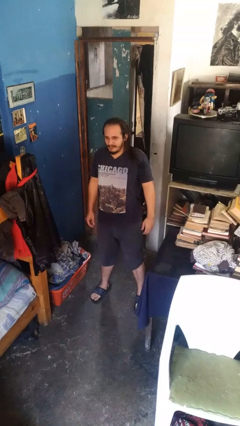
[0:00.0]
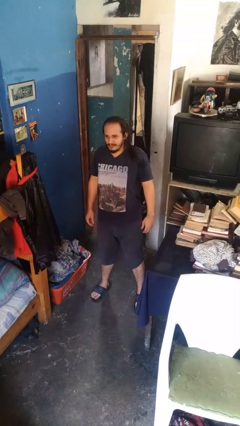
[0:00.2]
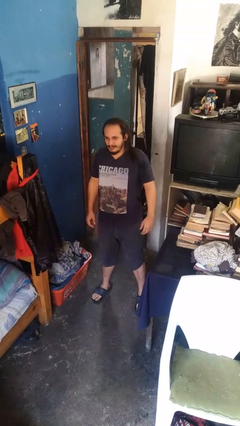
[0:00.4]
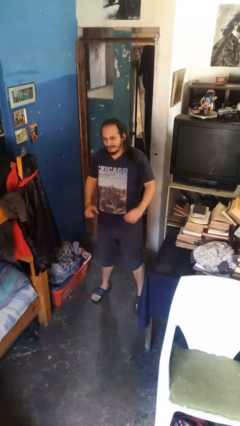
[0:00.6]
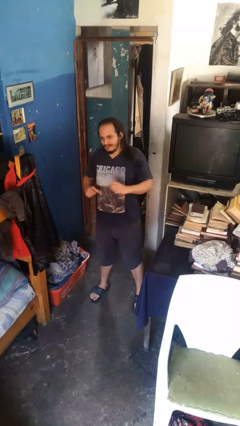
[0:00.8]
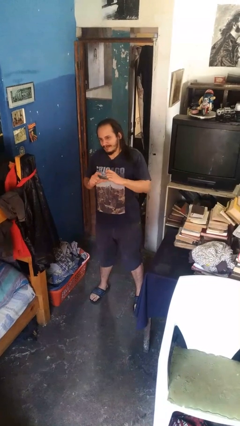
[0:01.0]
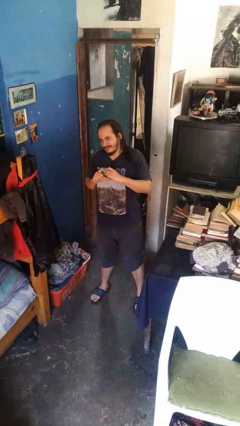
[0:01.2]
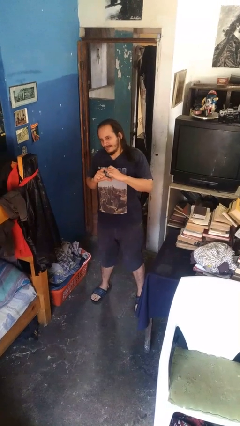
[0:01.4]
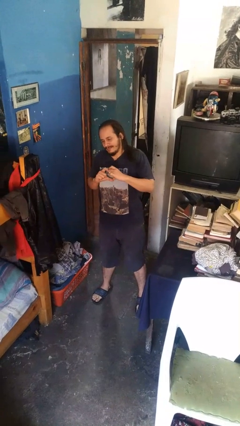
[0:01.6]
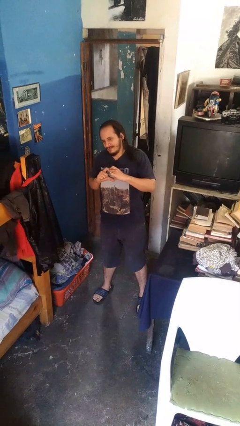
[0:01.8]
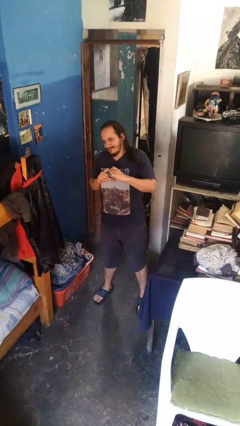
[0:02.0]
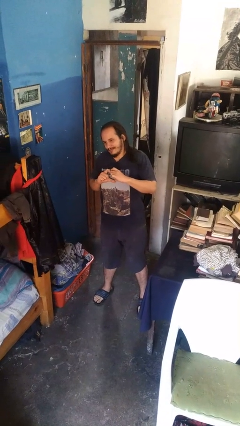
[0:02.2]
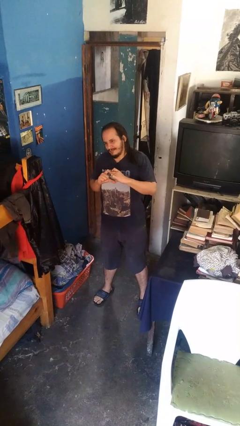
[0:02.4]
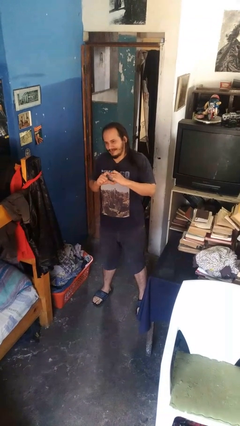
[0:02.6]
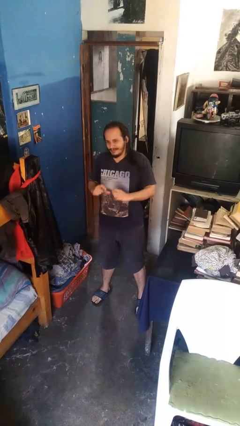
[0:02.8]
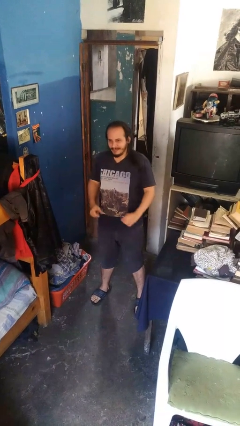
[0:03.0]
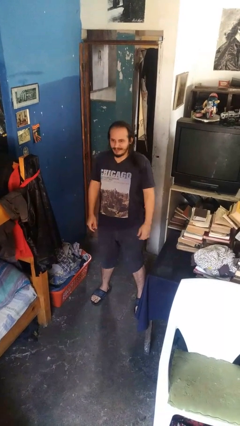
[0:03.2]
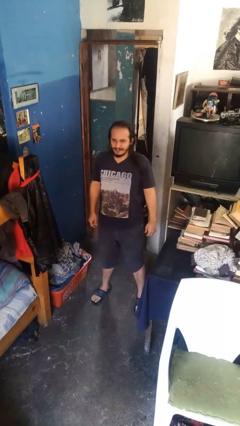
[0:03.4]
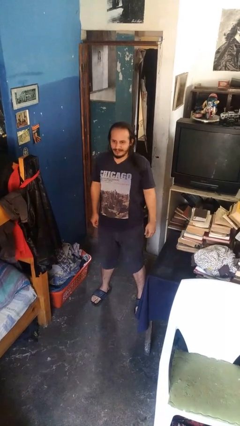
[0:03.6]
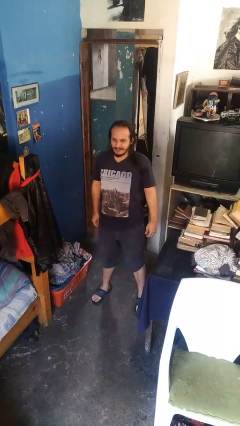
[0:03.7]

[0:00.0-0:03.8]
person gestures heart

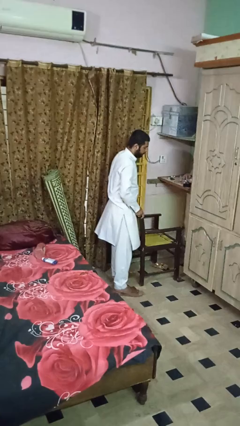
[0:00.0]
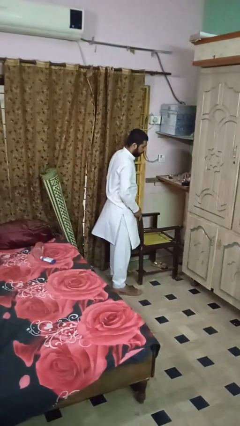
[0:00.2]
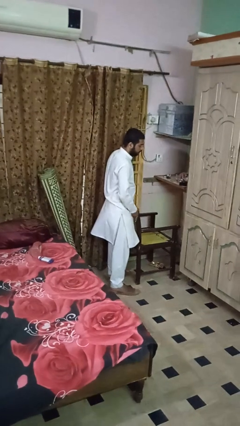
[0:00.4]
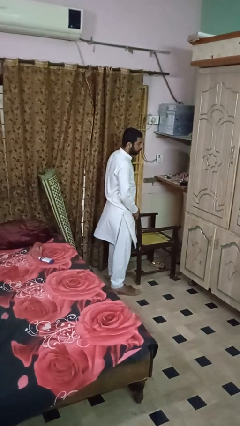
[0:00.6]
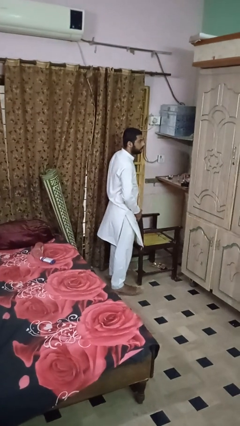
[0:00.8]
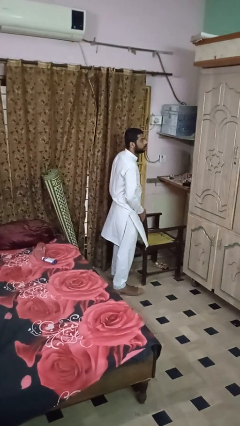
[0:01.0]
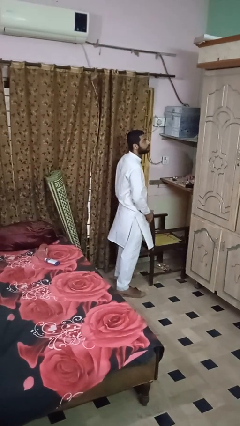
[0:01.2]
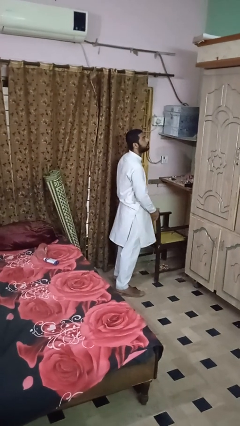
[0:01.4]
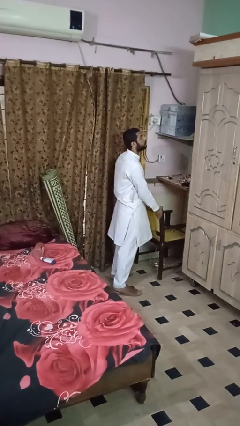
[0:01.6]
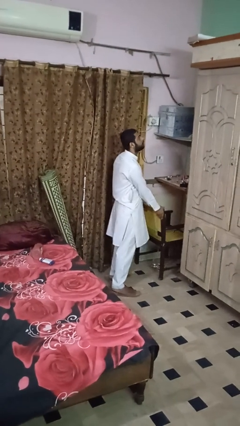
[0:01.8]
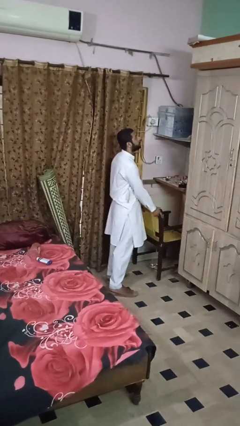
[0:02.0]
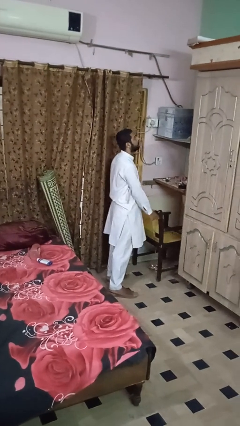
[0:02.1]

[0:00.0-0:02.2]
person pushes in chair

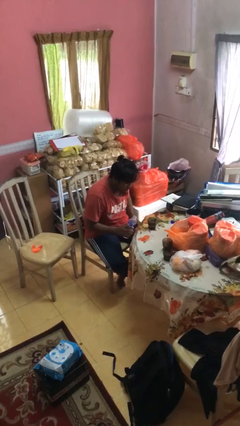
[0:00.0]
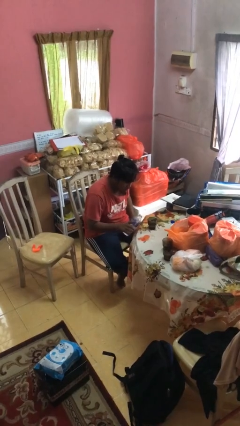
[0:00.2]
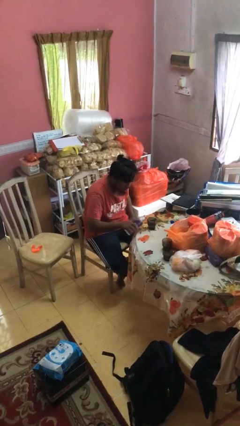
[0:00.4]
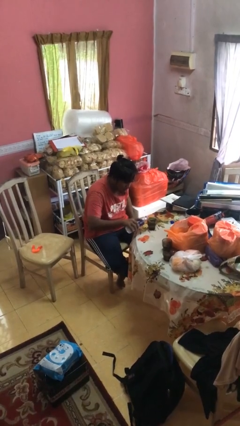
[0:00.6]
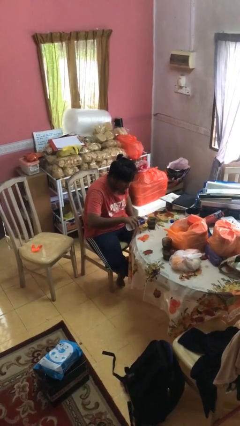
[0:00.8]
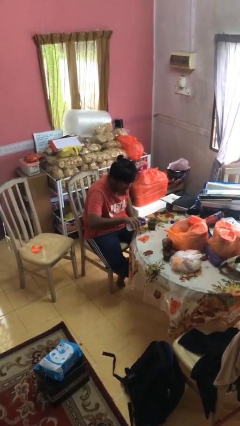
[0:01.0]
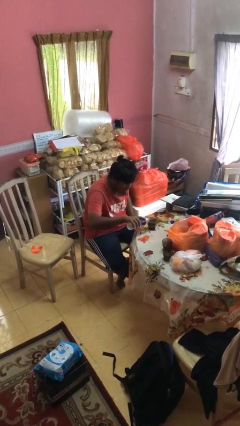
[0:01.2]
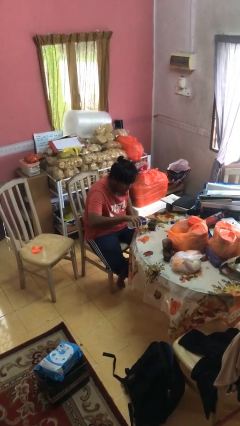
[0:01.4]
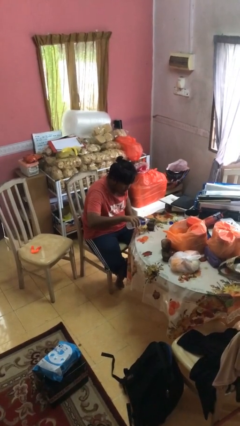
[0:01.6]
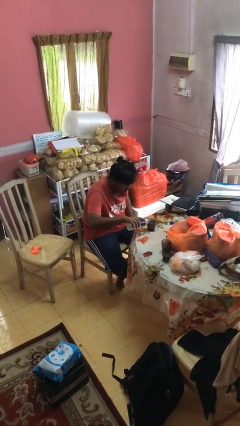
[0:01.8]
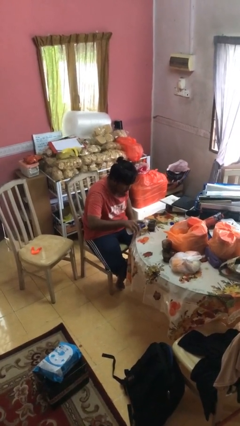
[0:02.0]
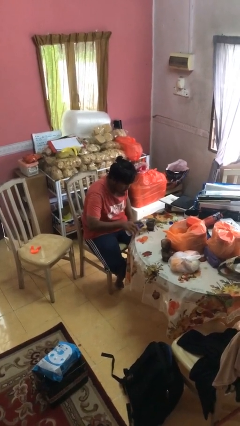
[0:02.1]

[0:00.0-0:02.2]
person pours liquid into cup

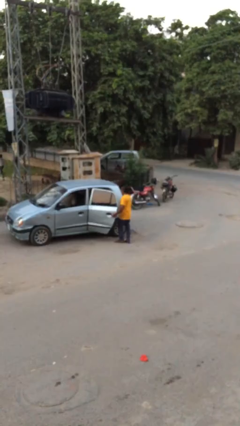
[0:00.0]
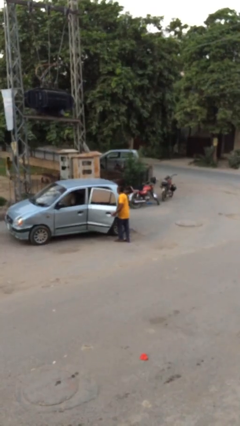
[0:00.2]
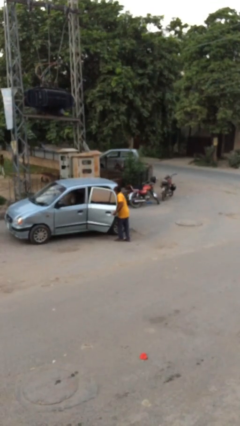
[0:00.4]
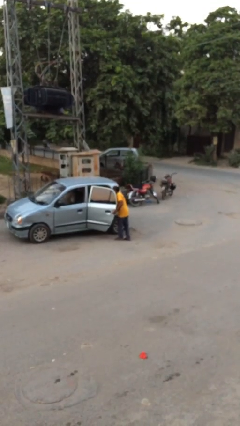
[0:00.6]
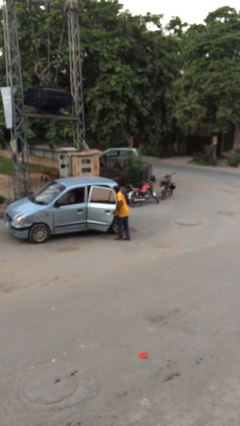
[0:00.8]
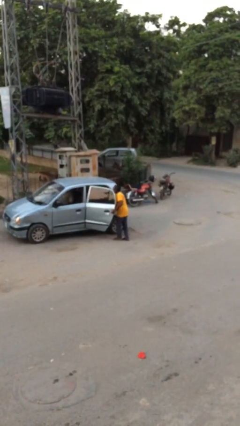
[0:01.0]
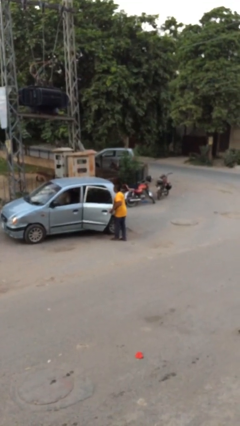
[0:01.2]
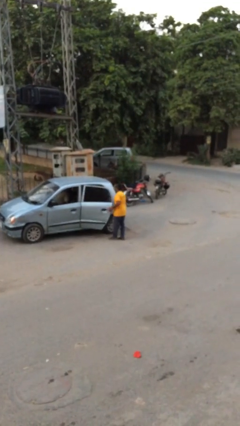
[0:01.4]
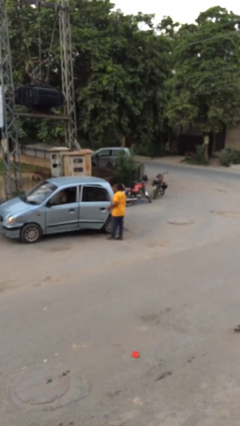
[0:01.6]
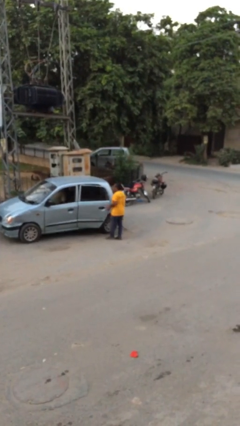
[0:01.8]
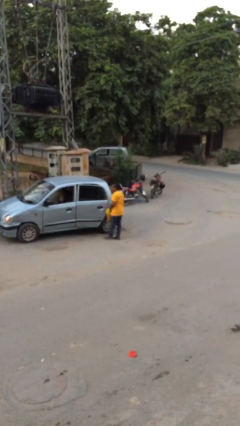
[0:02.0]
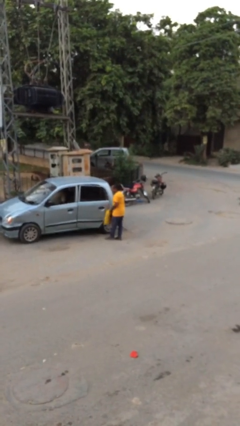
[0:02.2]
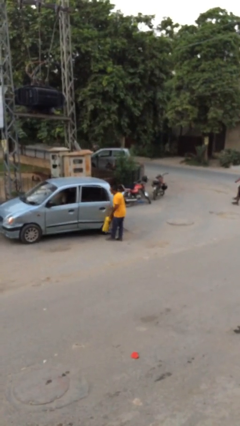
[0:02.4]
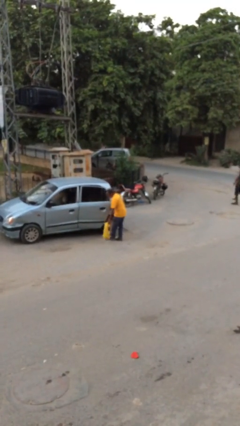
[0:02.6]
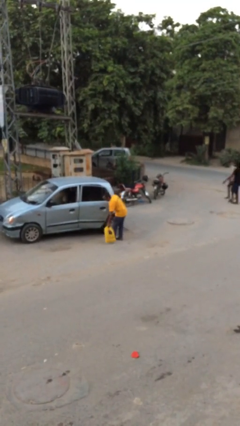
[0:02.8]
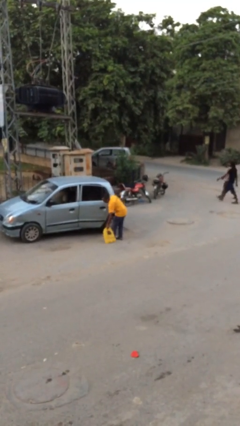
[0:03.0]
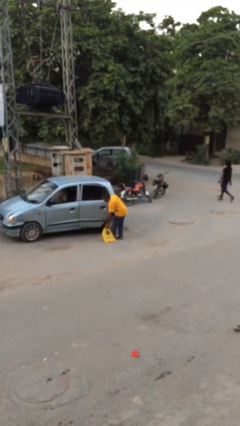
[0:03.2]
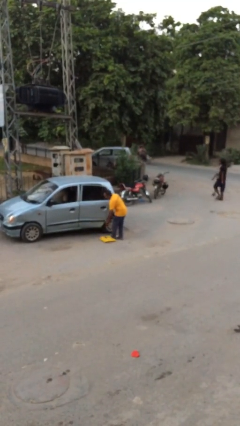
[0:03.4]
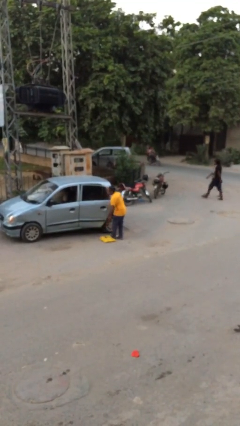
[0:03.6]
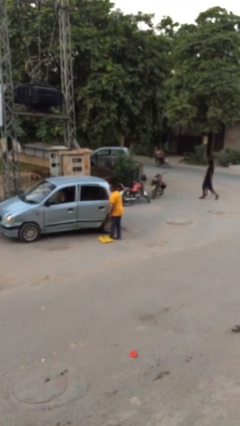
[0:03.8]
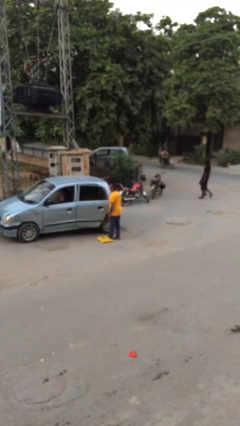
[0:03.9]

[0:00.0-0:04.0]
person unloads car

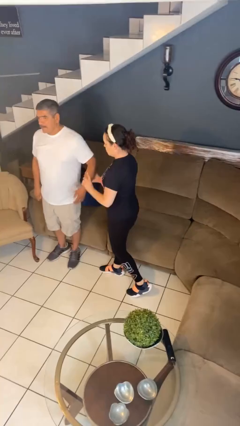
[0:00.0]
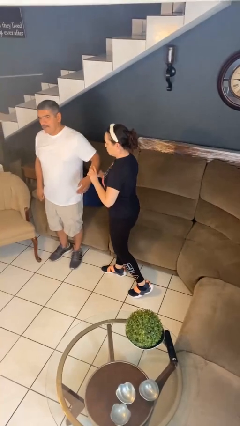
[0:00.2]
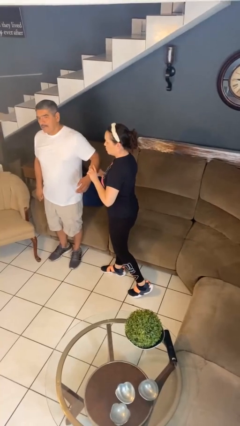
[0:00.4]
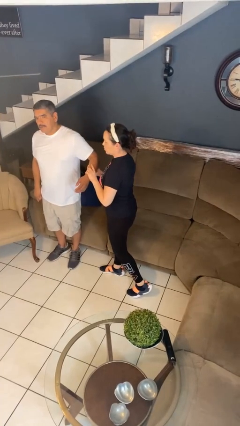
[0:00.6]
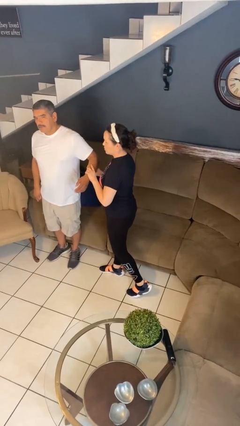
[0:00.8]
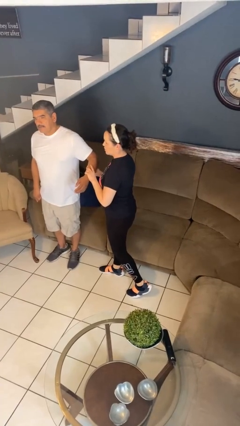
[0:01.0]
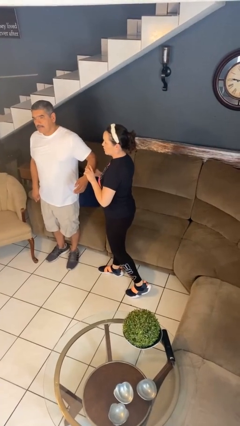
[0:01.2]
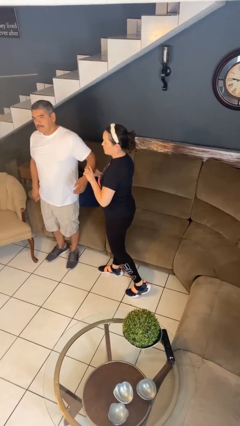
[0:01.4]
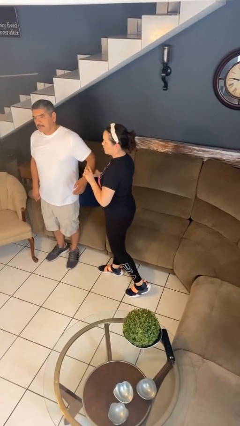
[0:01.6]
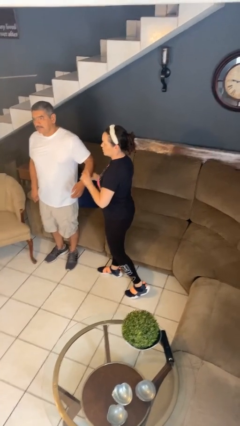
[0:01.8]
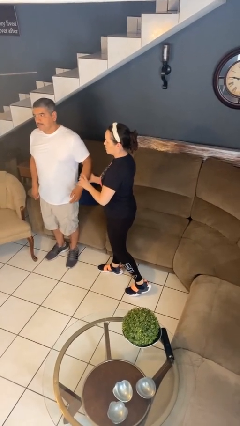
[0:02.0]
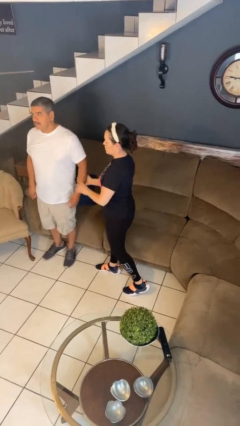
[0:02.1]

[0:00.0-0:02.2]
person grabs person by forearm

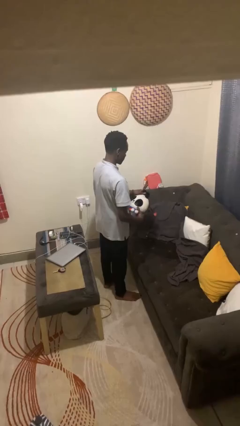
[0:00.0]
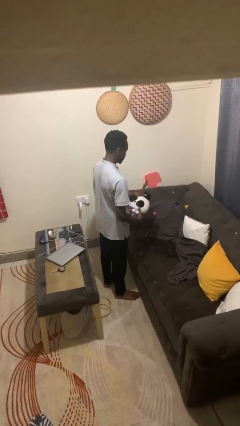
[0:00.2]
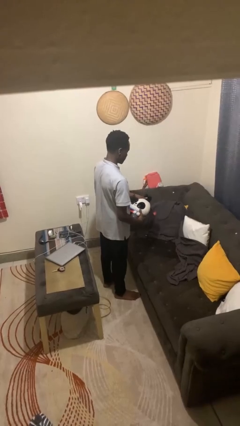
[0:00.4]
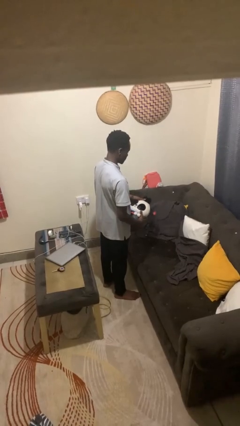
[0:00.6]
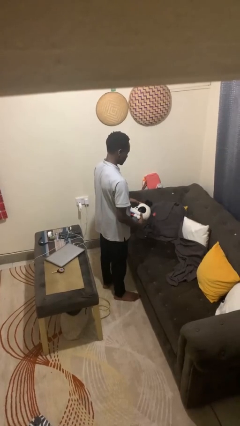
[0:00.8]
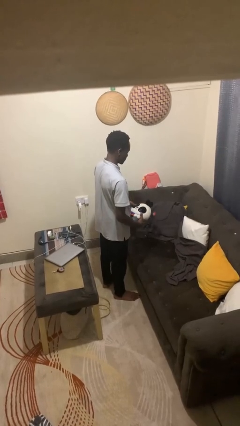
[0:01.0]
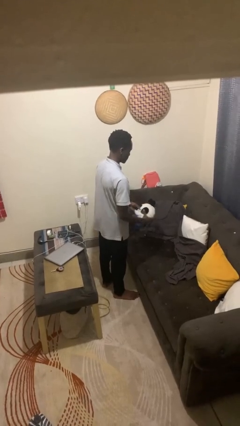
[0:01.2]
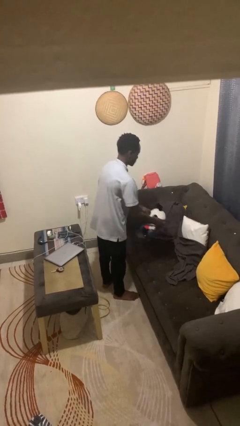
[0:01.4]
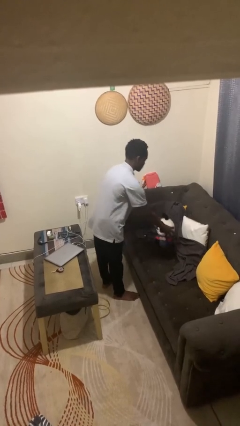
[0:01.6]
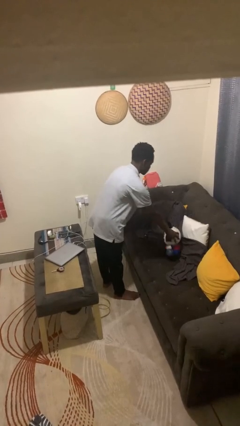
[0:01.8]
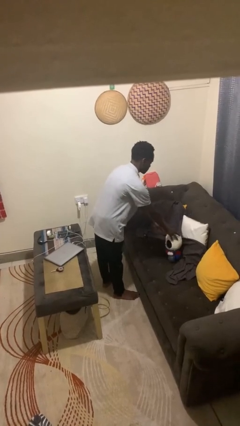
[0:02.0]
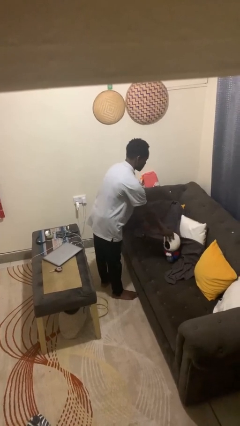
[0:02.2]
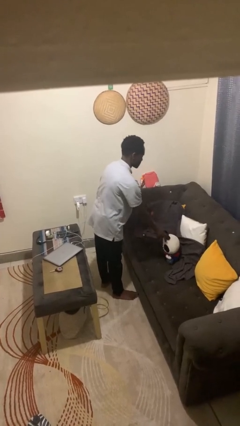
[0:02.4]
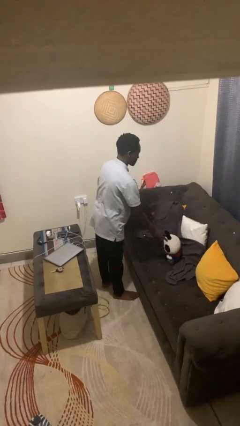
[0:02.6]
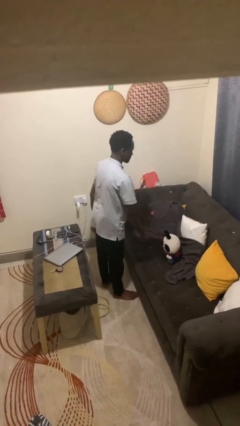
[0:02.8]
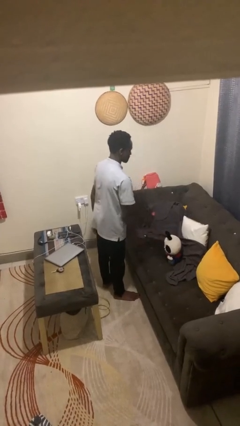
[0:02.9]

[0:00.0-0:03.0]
person puts down object on couch
